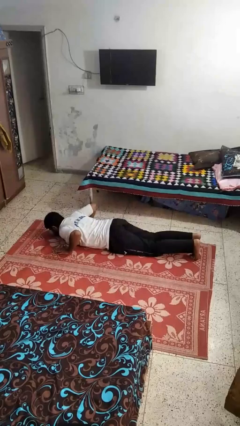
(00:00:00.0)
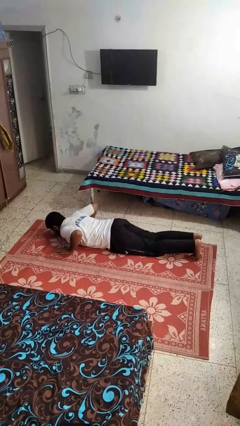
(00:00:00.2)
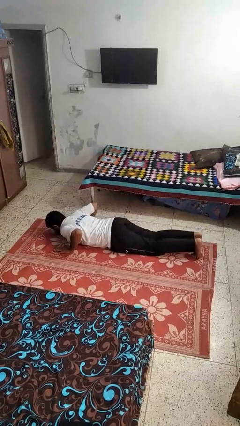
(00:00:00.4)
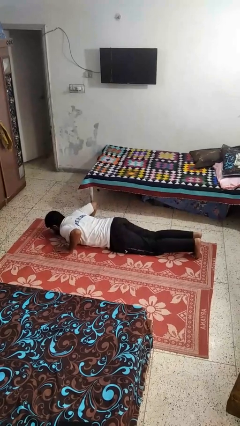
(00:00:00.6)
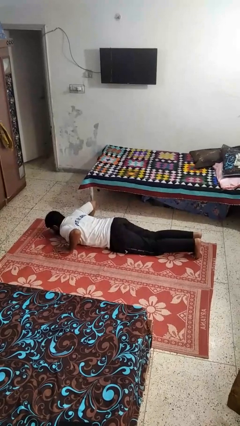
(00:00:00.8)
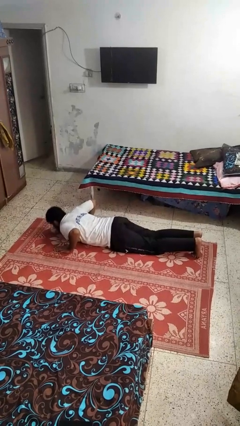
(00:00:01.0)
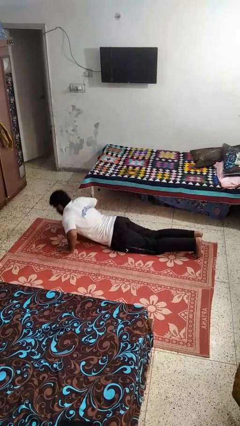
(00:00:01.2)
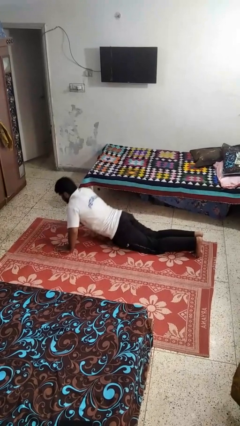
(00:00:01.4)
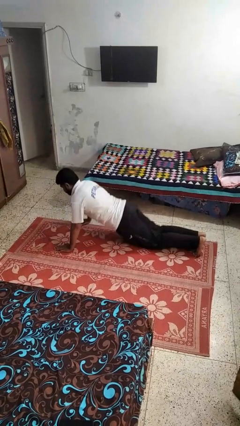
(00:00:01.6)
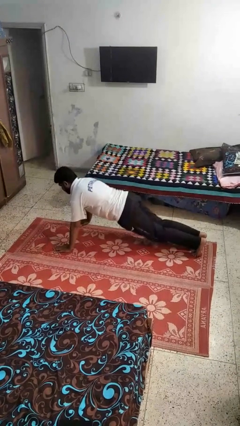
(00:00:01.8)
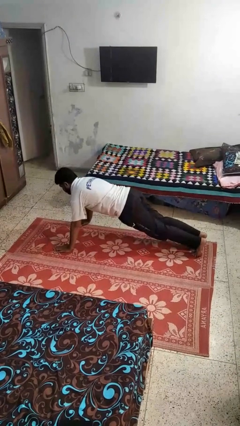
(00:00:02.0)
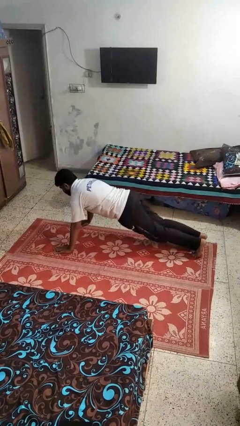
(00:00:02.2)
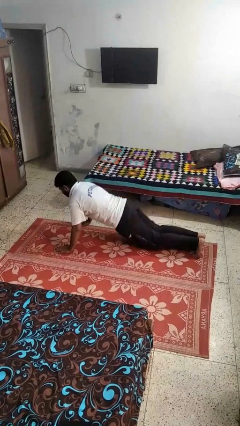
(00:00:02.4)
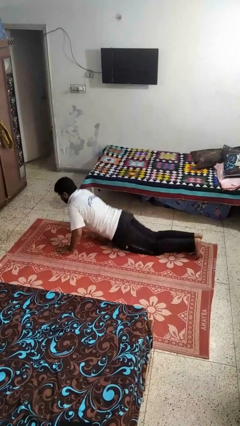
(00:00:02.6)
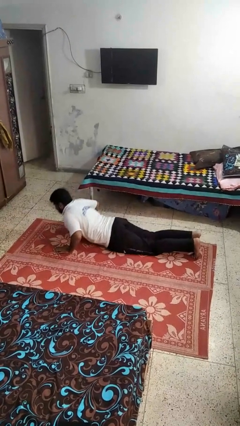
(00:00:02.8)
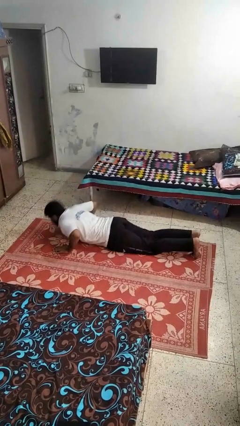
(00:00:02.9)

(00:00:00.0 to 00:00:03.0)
person exercises with pushup

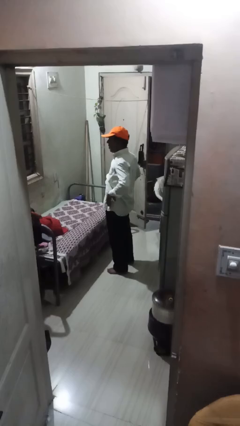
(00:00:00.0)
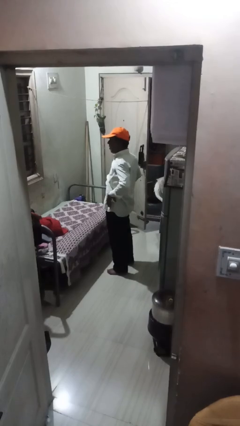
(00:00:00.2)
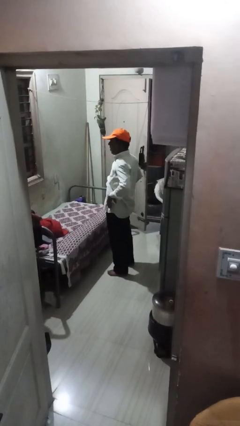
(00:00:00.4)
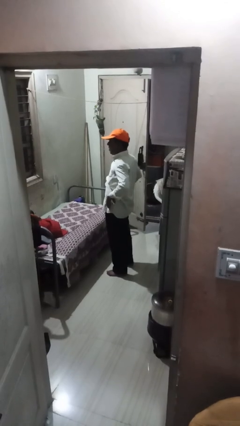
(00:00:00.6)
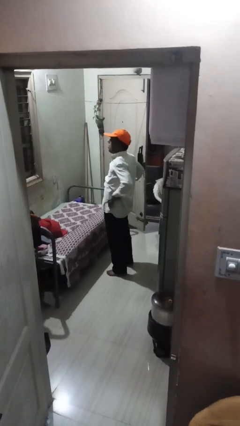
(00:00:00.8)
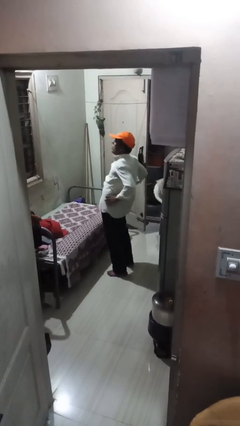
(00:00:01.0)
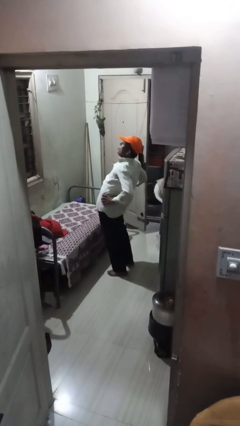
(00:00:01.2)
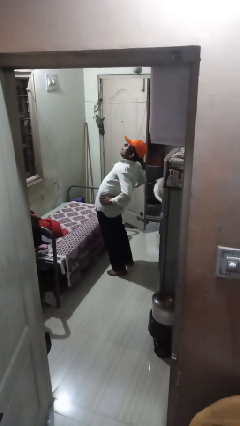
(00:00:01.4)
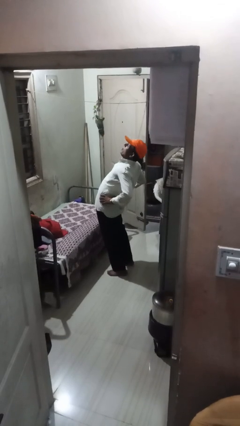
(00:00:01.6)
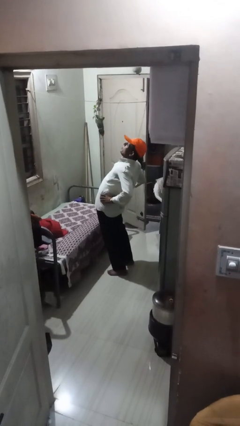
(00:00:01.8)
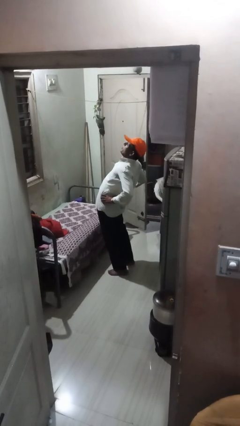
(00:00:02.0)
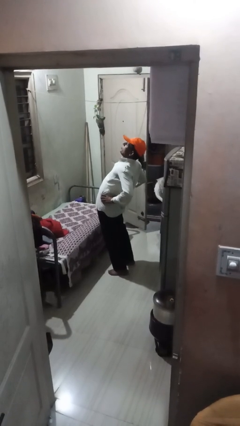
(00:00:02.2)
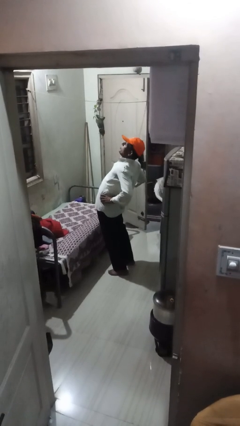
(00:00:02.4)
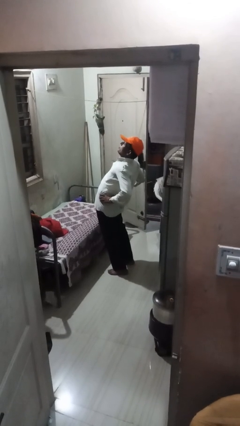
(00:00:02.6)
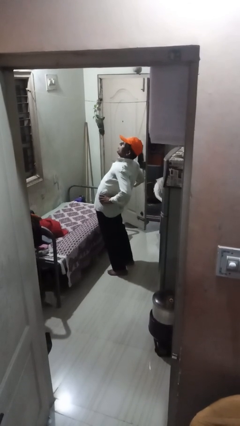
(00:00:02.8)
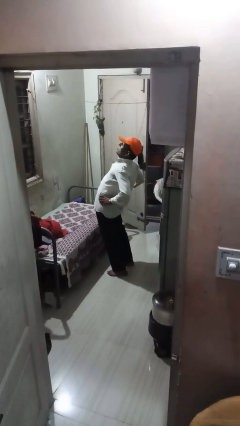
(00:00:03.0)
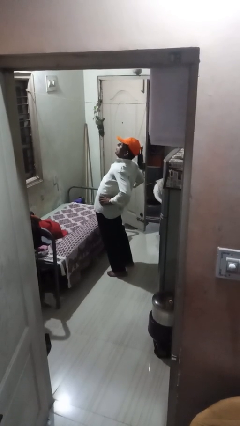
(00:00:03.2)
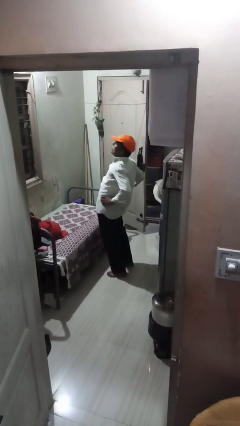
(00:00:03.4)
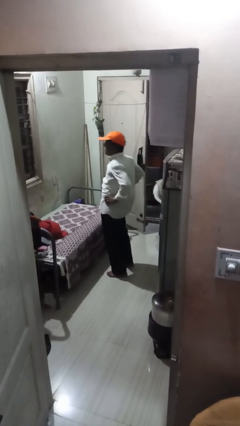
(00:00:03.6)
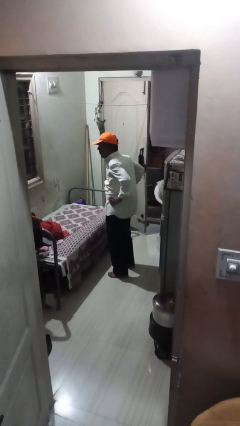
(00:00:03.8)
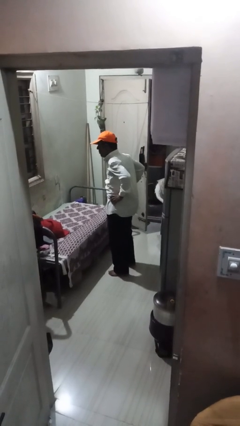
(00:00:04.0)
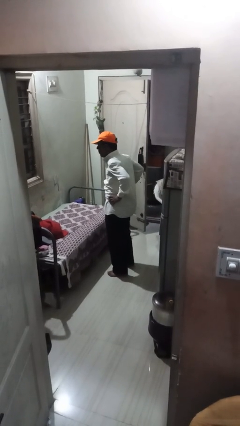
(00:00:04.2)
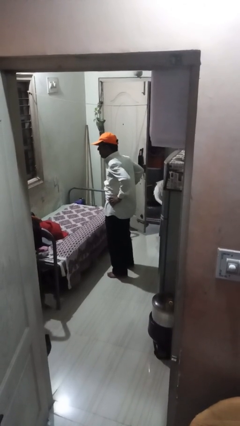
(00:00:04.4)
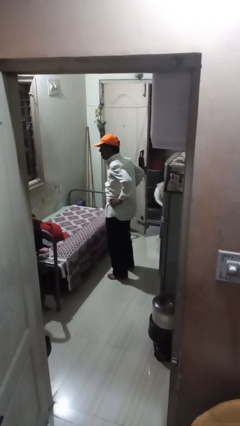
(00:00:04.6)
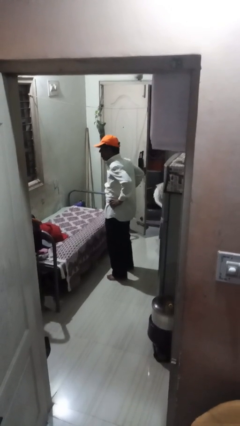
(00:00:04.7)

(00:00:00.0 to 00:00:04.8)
person stretches back

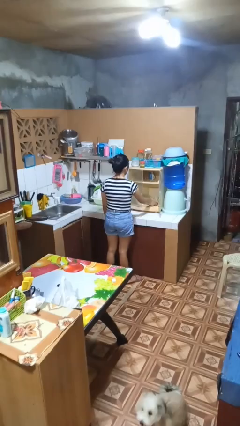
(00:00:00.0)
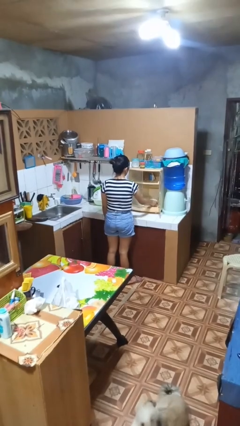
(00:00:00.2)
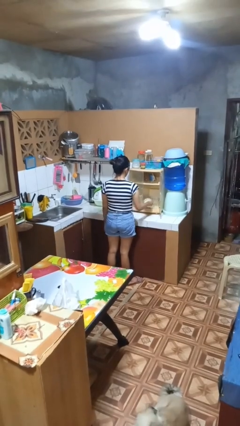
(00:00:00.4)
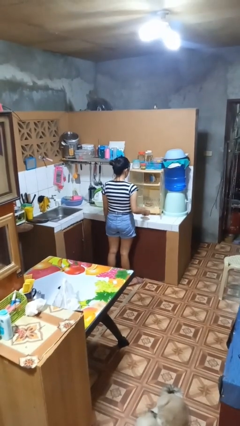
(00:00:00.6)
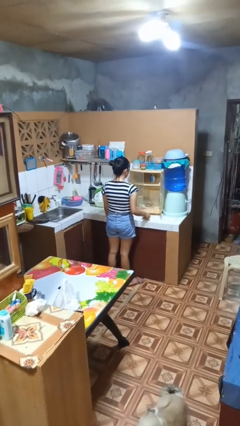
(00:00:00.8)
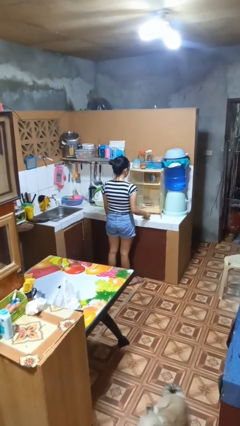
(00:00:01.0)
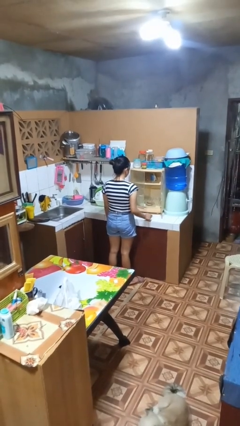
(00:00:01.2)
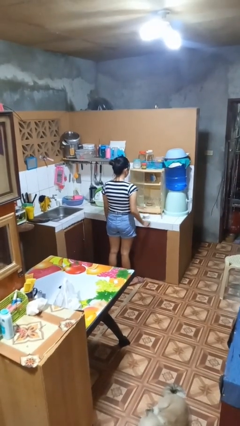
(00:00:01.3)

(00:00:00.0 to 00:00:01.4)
person takes object from cabinet

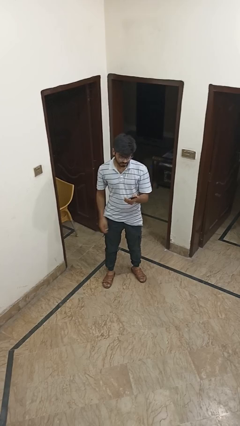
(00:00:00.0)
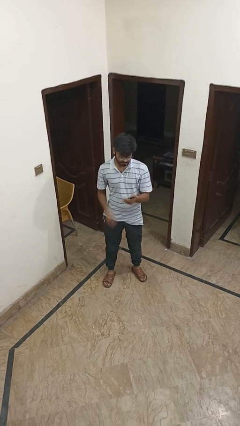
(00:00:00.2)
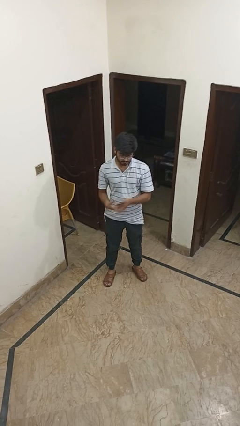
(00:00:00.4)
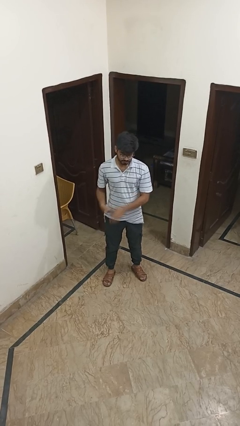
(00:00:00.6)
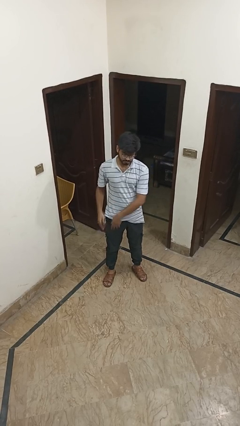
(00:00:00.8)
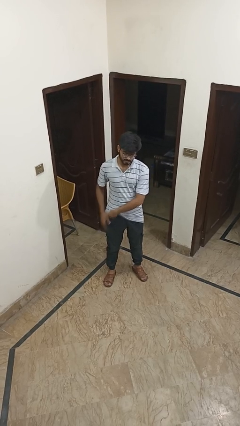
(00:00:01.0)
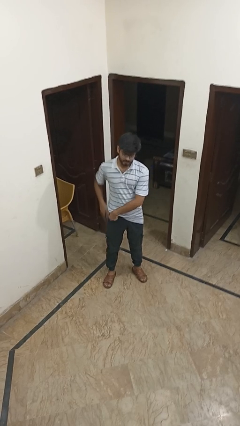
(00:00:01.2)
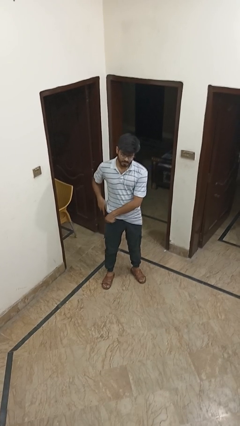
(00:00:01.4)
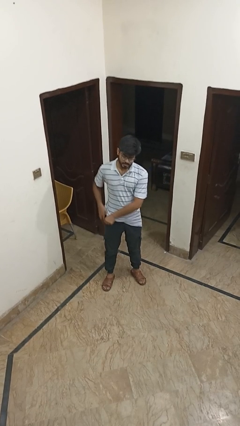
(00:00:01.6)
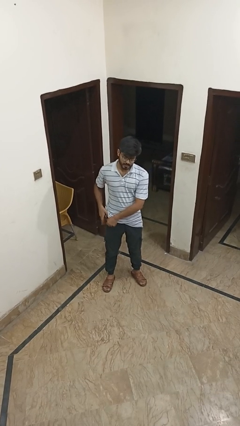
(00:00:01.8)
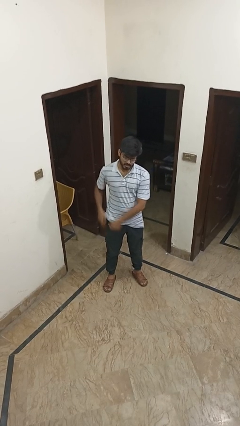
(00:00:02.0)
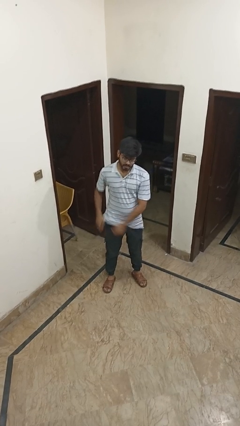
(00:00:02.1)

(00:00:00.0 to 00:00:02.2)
person puts phone into pocket

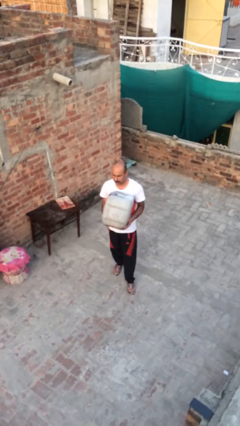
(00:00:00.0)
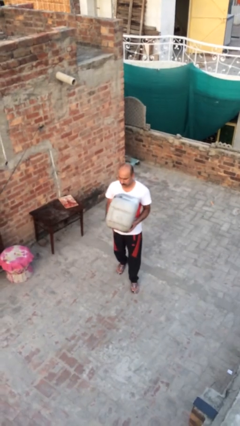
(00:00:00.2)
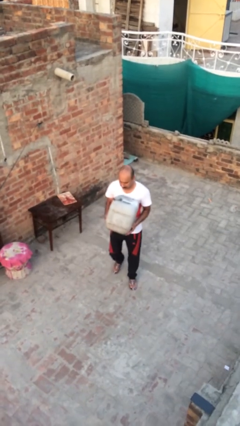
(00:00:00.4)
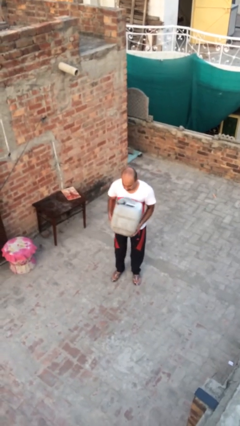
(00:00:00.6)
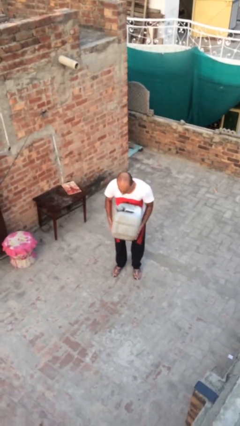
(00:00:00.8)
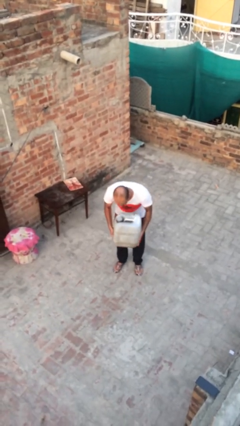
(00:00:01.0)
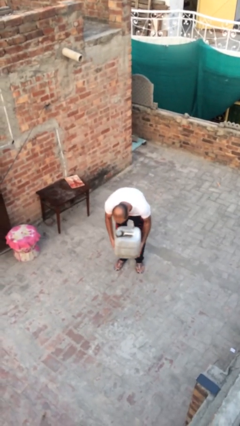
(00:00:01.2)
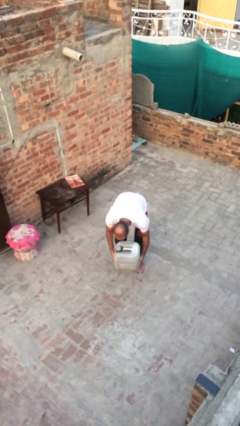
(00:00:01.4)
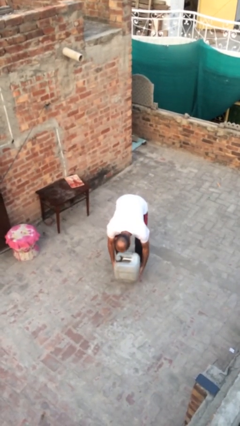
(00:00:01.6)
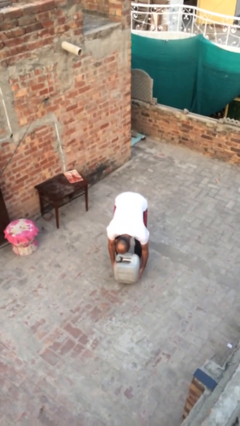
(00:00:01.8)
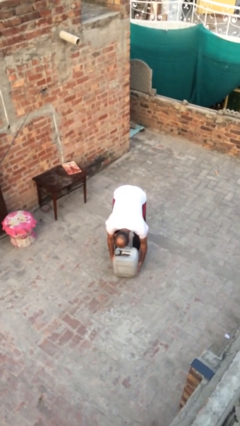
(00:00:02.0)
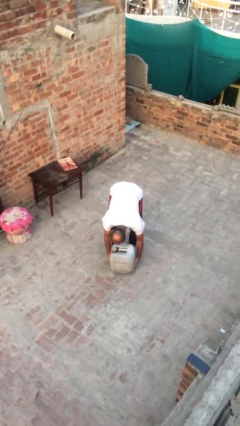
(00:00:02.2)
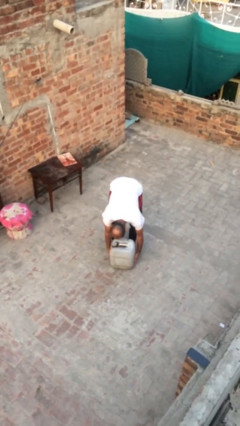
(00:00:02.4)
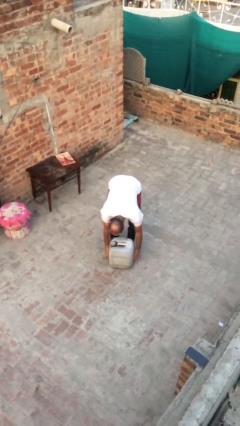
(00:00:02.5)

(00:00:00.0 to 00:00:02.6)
person puts down object on floor

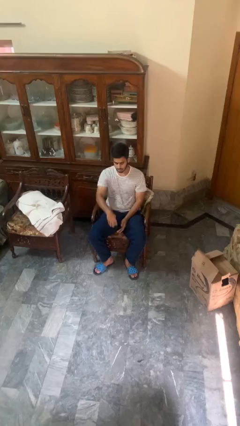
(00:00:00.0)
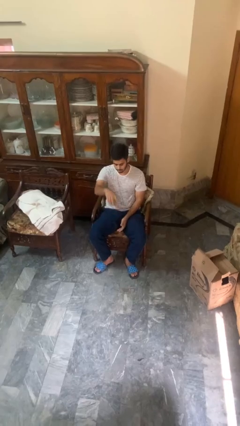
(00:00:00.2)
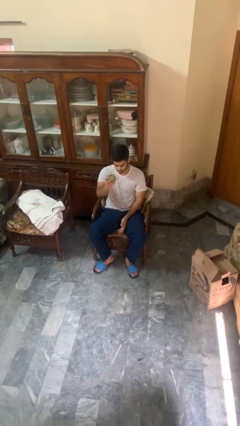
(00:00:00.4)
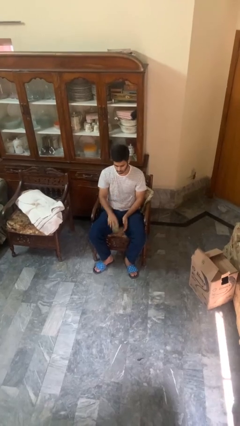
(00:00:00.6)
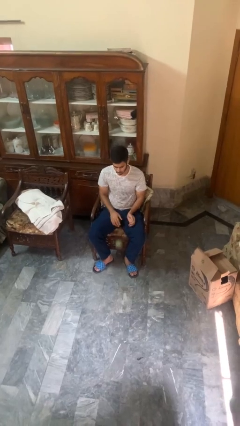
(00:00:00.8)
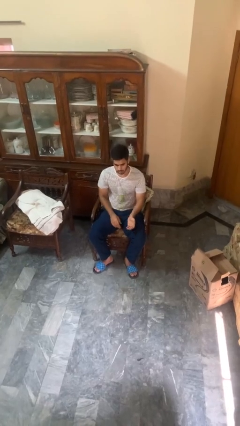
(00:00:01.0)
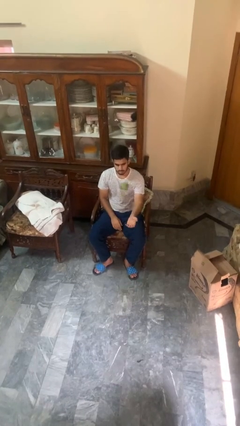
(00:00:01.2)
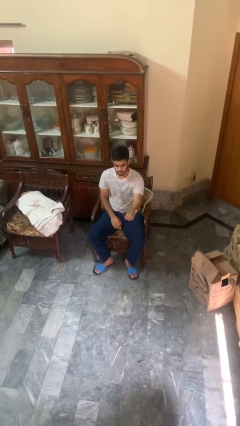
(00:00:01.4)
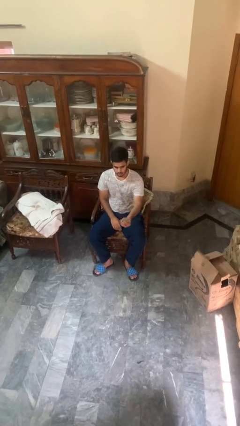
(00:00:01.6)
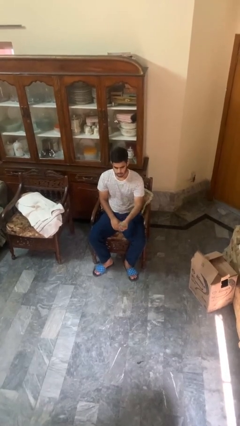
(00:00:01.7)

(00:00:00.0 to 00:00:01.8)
person bounces ball on floor

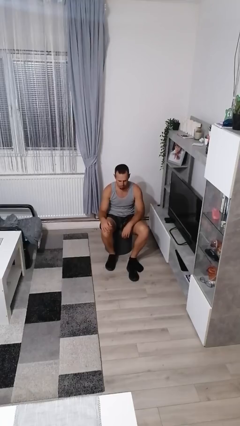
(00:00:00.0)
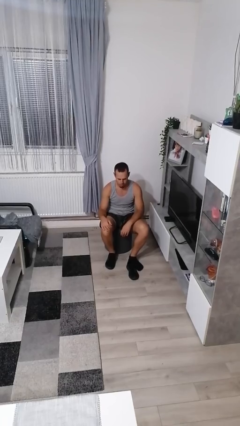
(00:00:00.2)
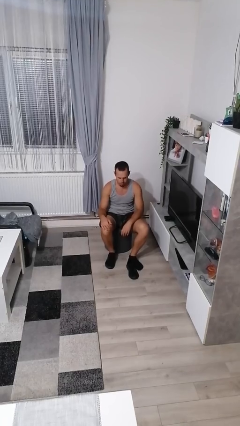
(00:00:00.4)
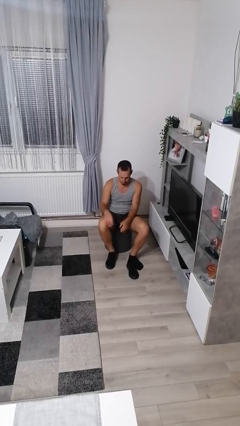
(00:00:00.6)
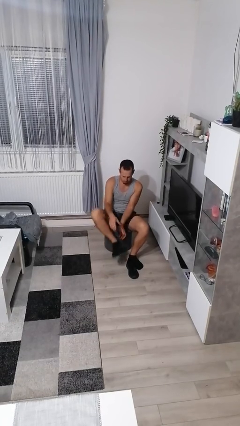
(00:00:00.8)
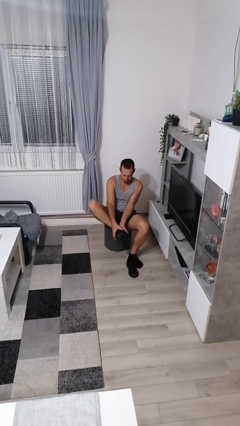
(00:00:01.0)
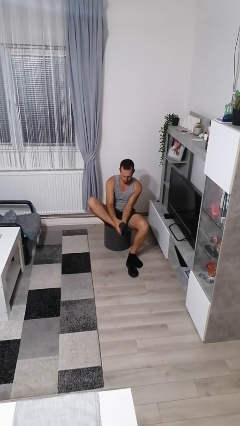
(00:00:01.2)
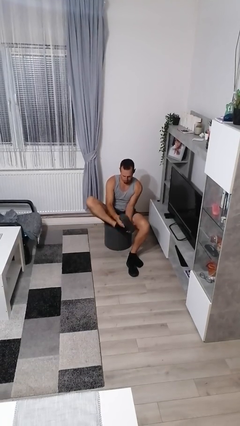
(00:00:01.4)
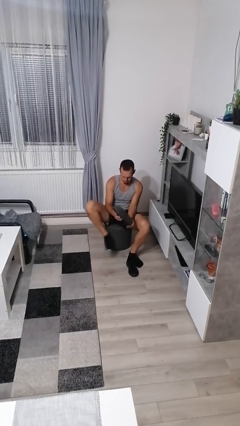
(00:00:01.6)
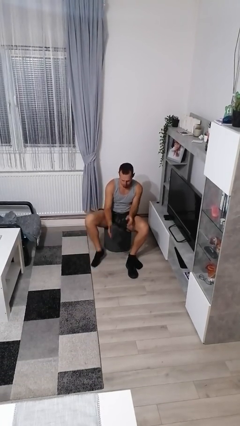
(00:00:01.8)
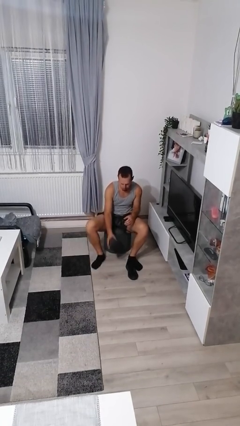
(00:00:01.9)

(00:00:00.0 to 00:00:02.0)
person takes off shoes
